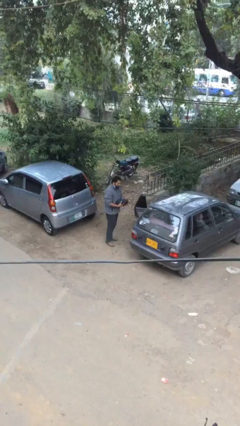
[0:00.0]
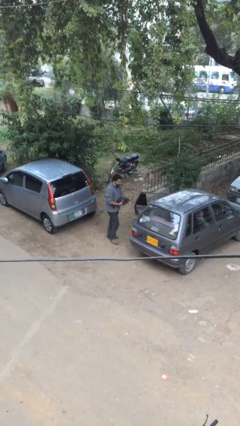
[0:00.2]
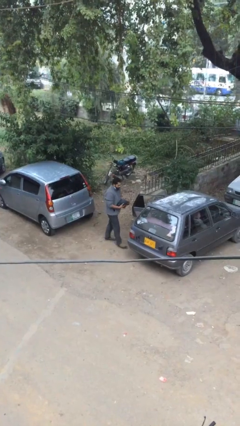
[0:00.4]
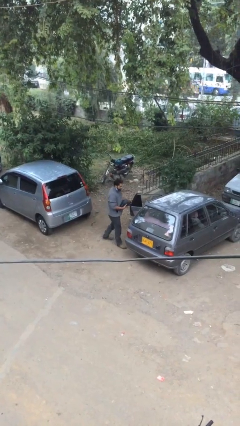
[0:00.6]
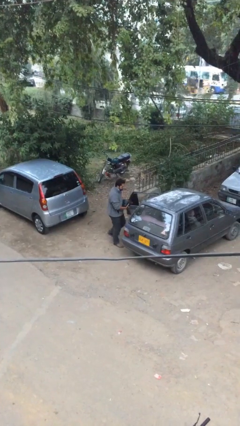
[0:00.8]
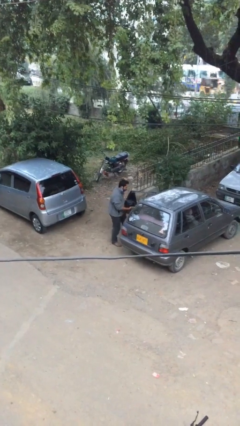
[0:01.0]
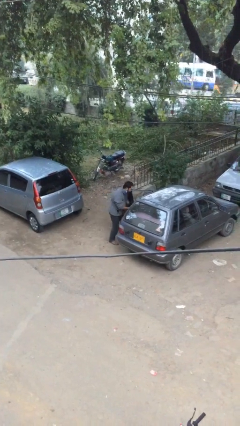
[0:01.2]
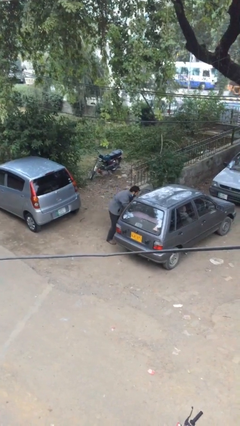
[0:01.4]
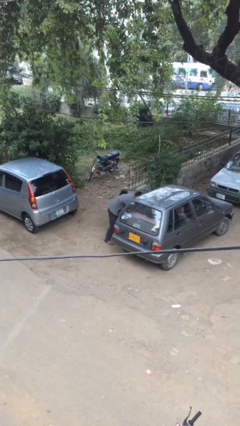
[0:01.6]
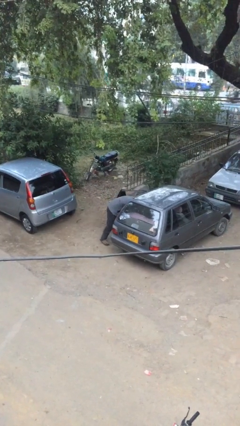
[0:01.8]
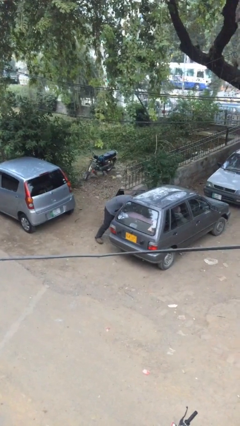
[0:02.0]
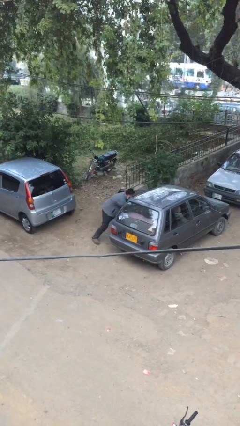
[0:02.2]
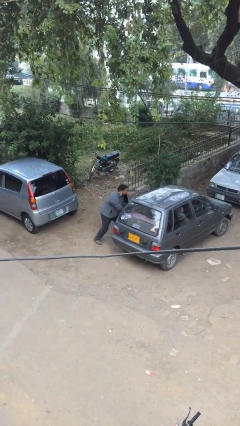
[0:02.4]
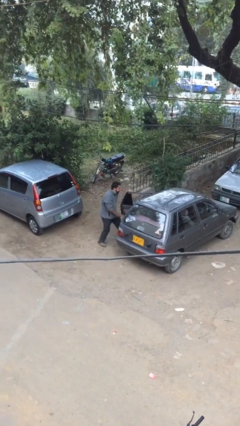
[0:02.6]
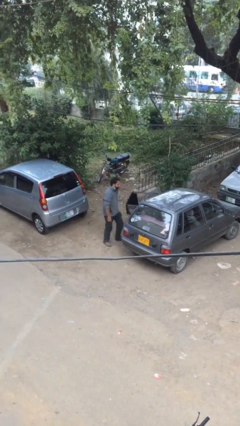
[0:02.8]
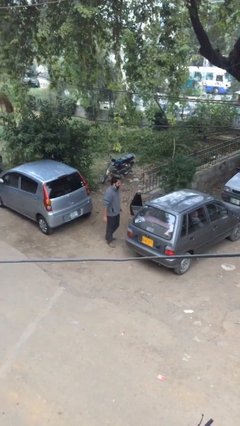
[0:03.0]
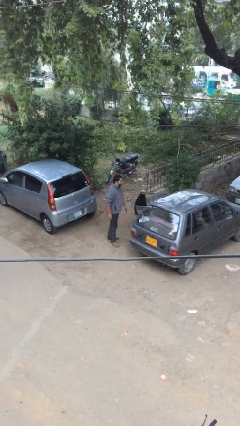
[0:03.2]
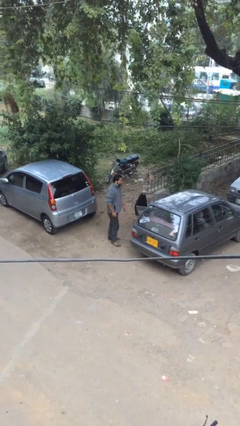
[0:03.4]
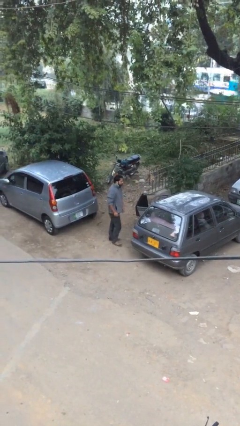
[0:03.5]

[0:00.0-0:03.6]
person loads car

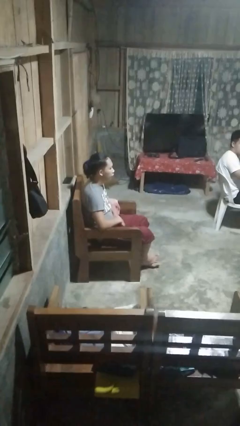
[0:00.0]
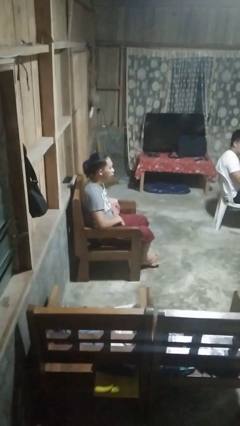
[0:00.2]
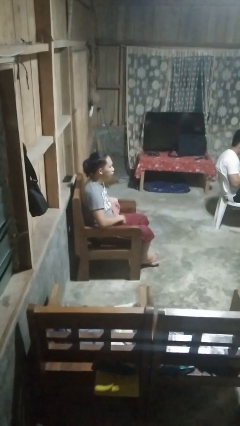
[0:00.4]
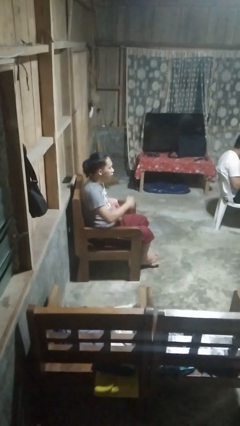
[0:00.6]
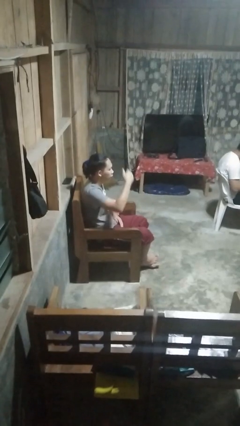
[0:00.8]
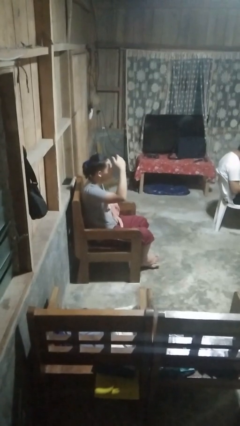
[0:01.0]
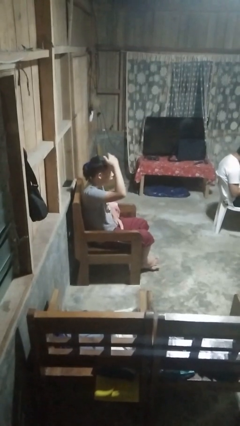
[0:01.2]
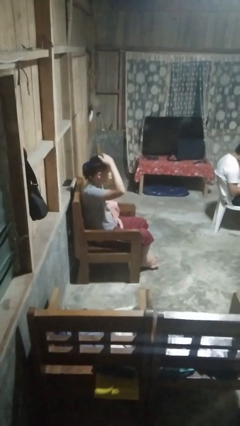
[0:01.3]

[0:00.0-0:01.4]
person pats head

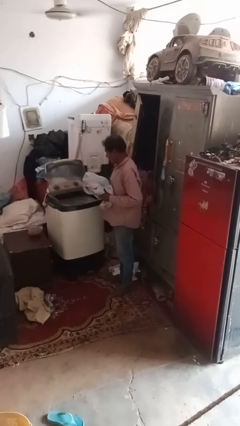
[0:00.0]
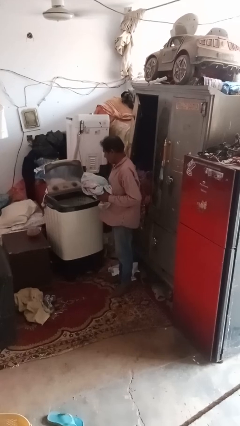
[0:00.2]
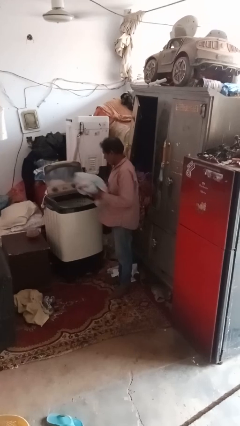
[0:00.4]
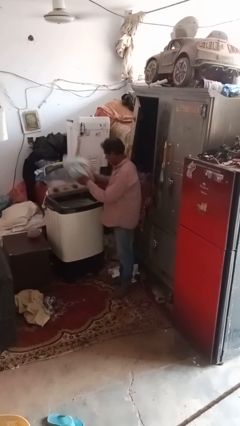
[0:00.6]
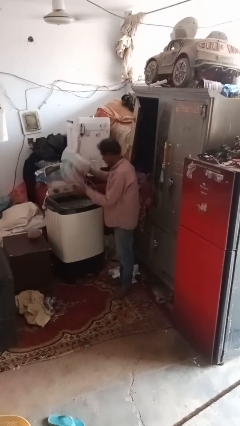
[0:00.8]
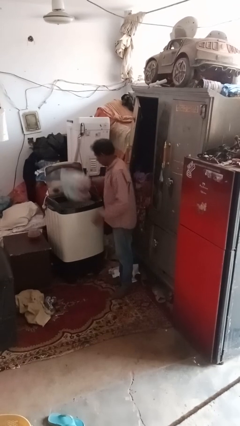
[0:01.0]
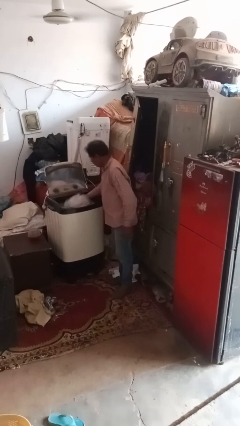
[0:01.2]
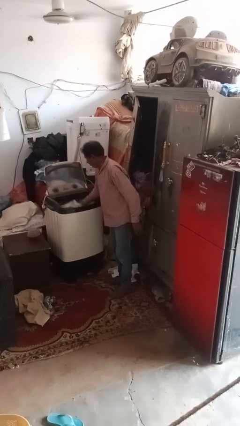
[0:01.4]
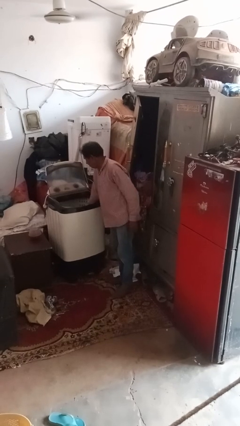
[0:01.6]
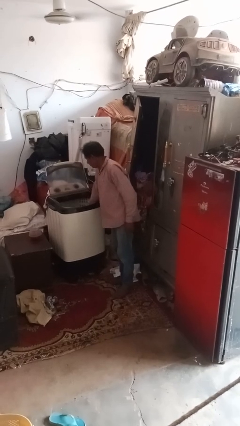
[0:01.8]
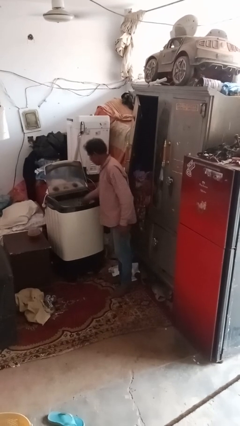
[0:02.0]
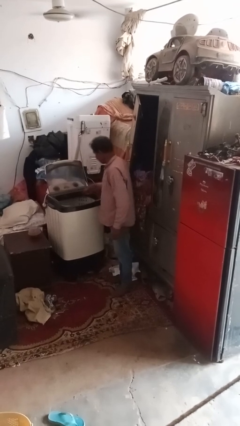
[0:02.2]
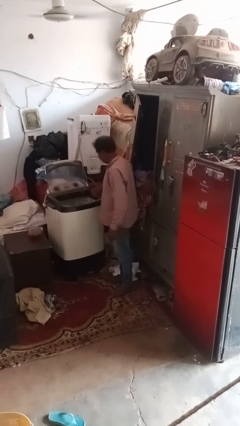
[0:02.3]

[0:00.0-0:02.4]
person loads clotheswasher

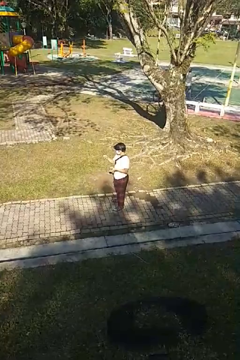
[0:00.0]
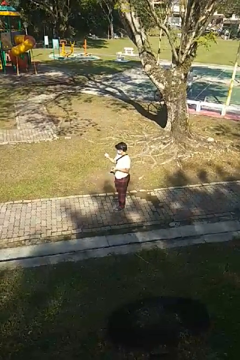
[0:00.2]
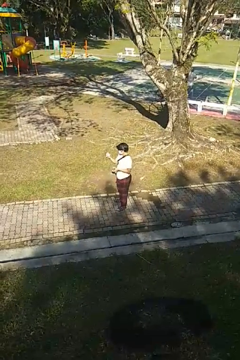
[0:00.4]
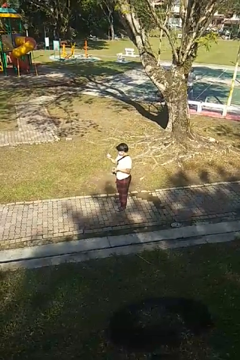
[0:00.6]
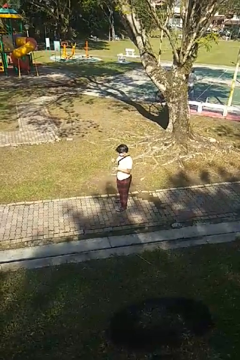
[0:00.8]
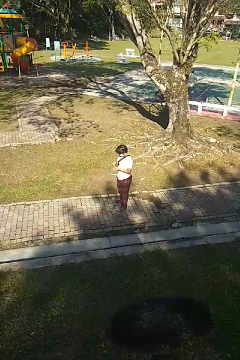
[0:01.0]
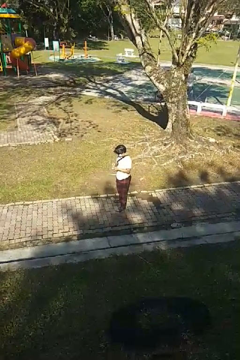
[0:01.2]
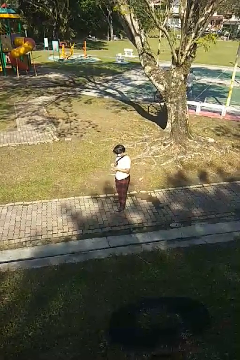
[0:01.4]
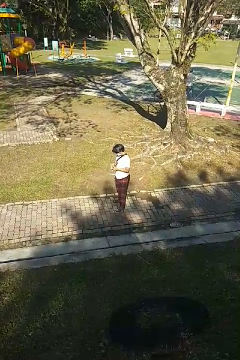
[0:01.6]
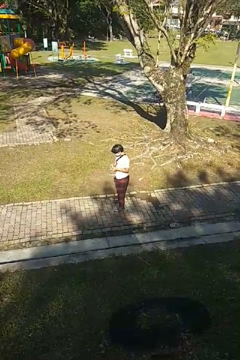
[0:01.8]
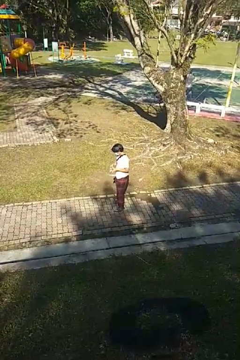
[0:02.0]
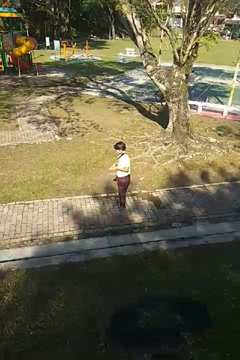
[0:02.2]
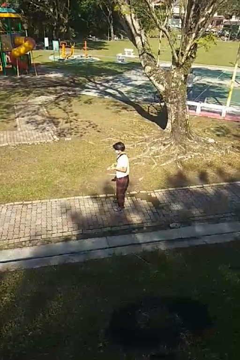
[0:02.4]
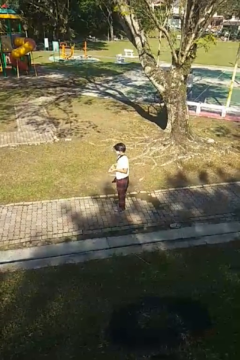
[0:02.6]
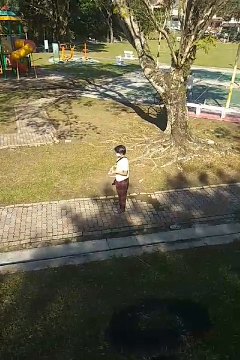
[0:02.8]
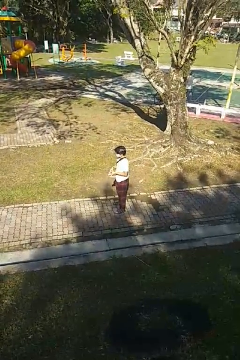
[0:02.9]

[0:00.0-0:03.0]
person puts object into purse

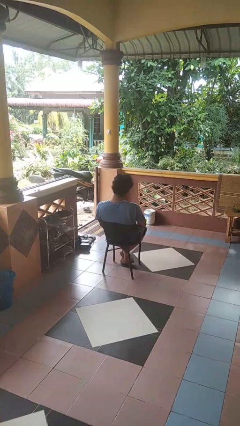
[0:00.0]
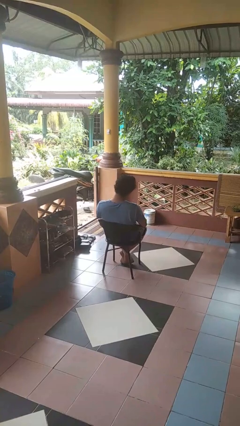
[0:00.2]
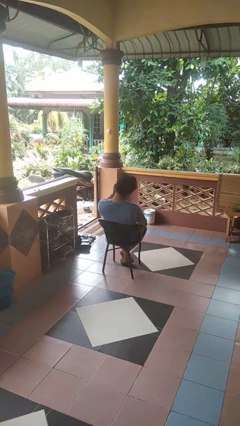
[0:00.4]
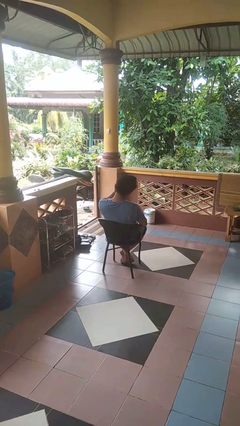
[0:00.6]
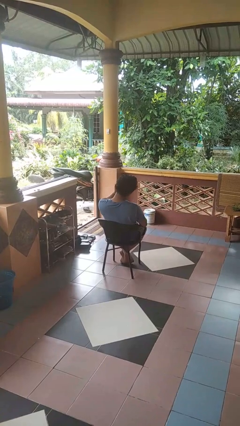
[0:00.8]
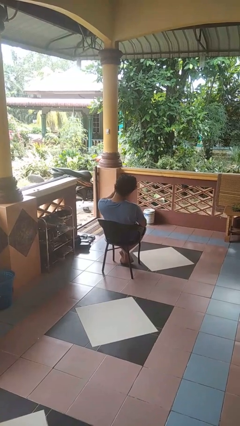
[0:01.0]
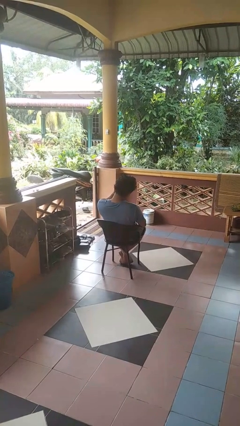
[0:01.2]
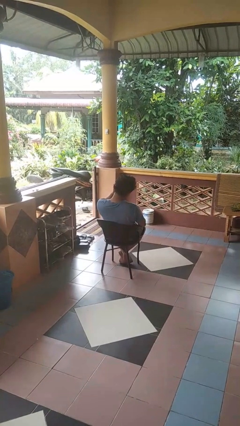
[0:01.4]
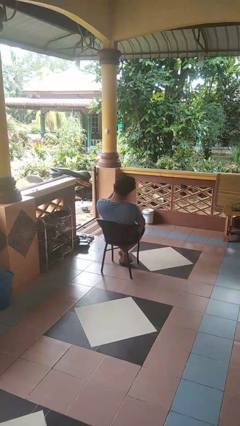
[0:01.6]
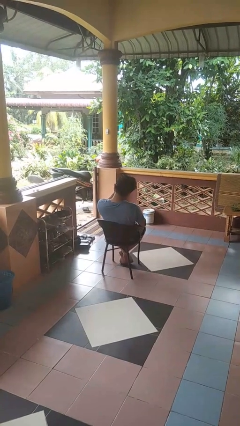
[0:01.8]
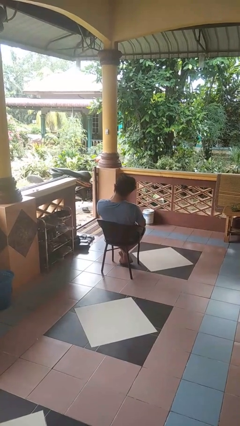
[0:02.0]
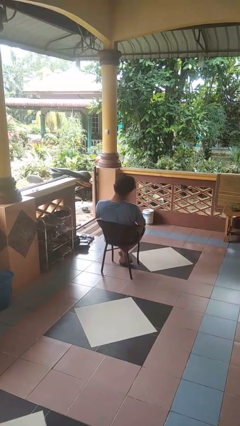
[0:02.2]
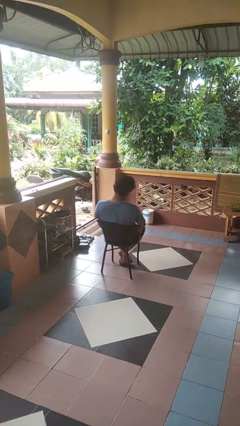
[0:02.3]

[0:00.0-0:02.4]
person touches earlobe

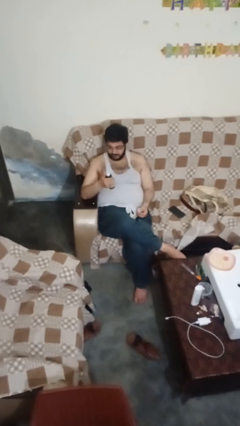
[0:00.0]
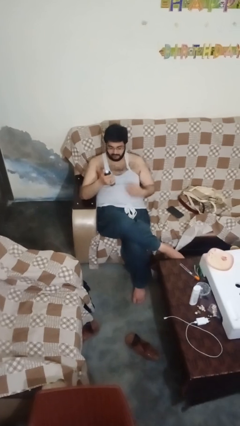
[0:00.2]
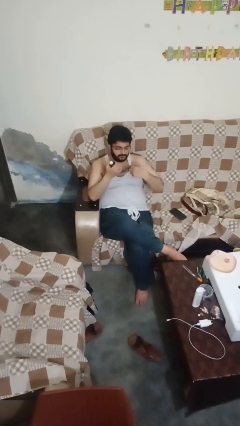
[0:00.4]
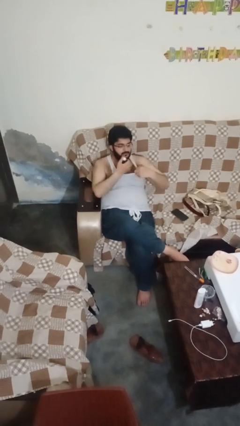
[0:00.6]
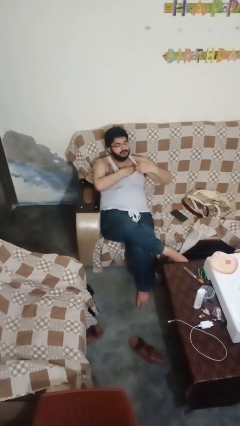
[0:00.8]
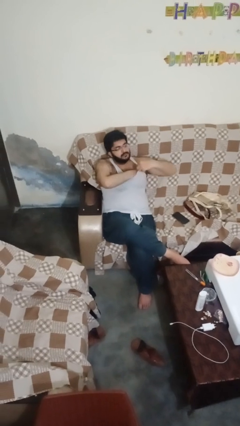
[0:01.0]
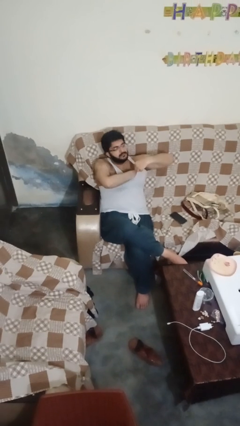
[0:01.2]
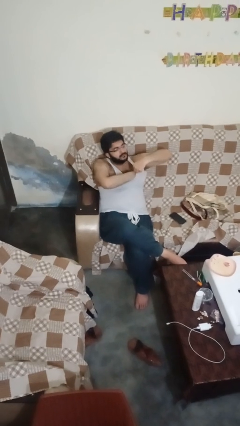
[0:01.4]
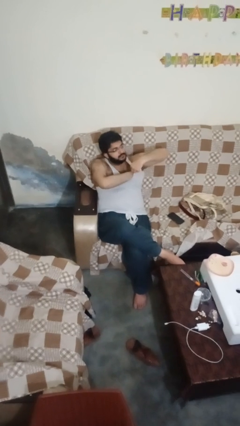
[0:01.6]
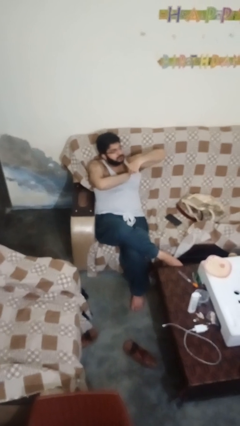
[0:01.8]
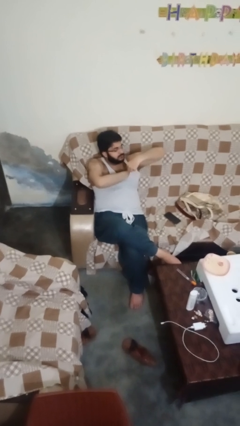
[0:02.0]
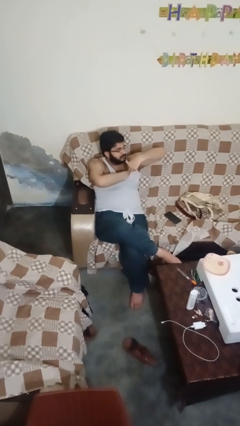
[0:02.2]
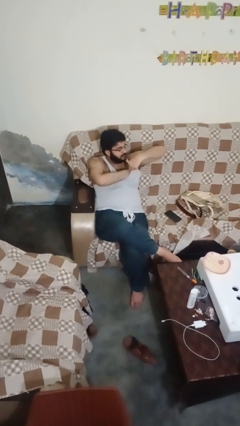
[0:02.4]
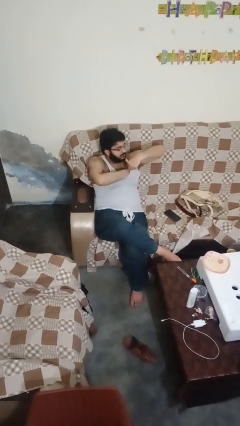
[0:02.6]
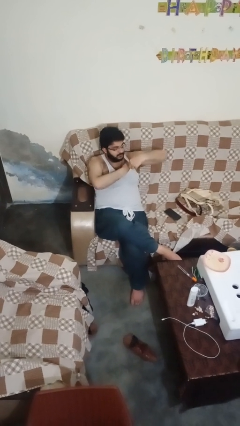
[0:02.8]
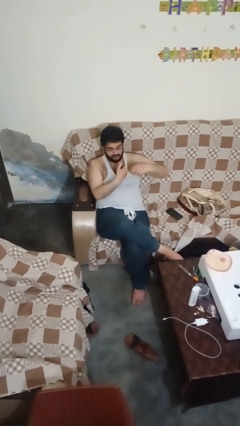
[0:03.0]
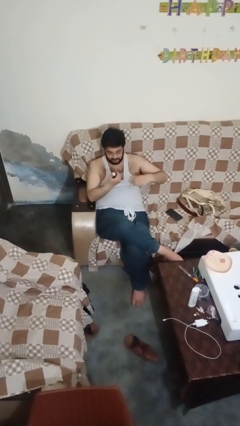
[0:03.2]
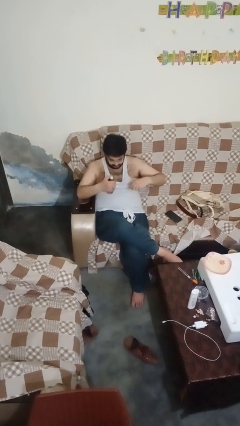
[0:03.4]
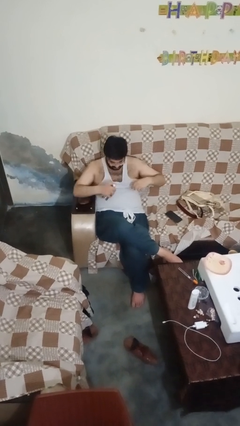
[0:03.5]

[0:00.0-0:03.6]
person applies deodorant

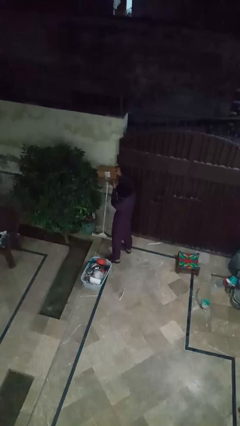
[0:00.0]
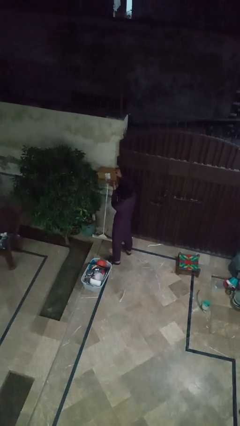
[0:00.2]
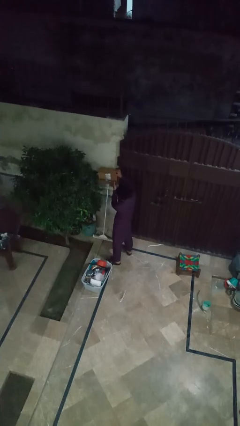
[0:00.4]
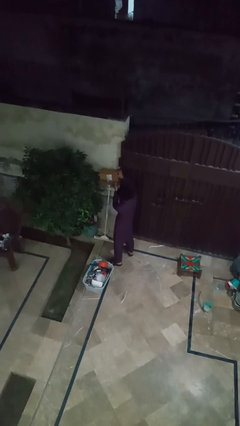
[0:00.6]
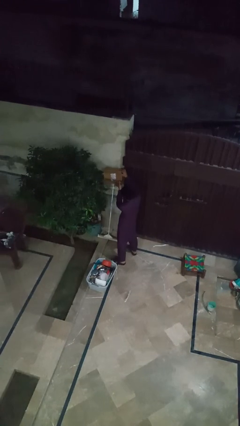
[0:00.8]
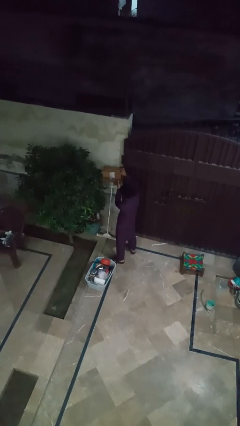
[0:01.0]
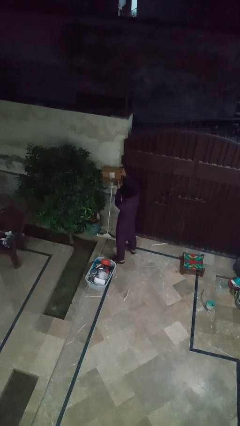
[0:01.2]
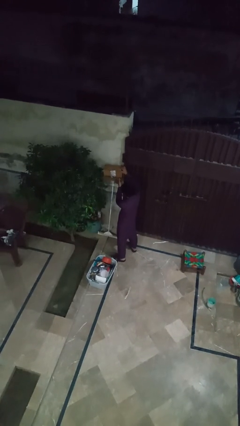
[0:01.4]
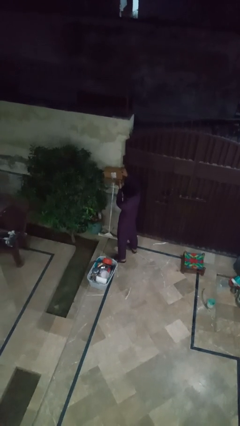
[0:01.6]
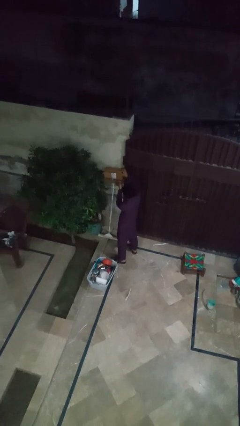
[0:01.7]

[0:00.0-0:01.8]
person opens mailbox
